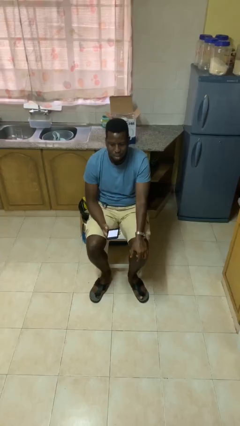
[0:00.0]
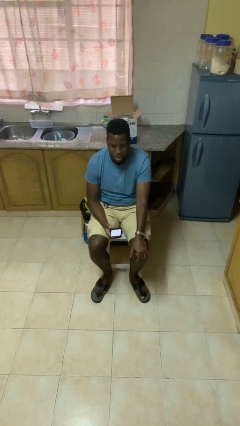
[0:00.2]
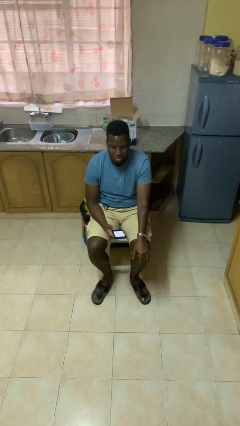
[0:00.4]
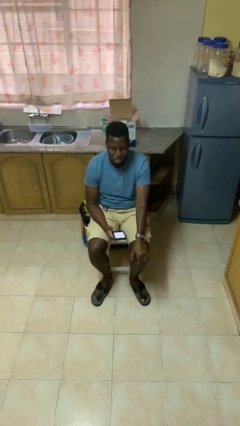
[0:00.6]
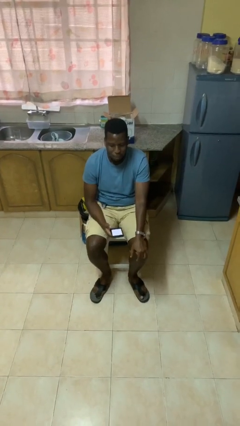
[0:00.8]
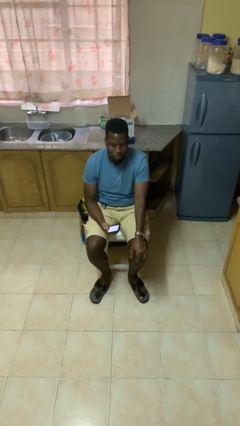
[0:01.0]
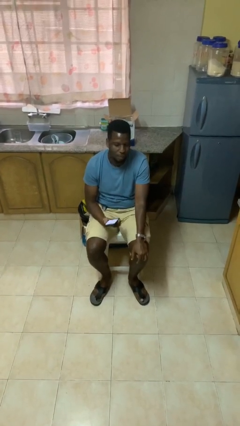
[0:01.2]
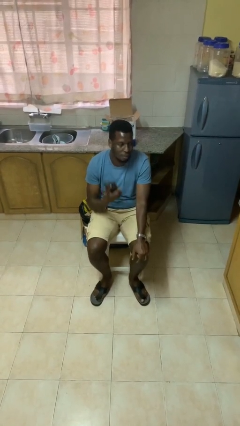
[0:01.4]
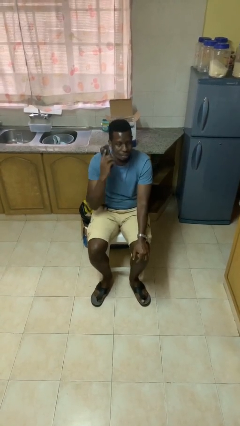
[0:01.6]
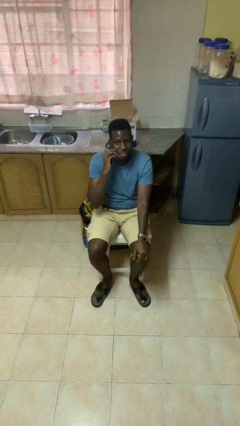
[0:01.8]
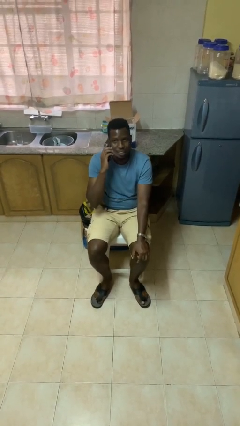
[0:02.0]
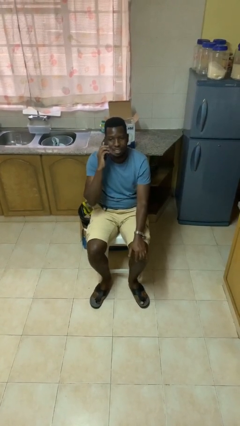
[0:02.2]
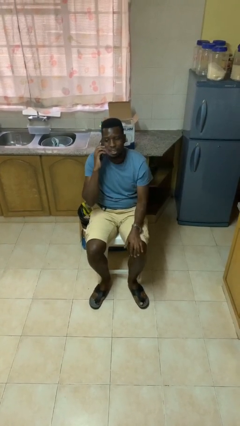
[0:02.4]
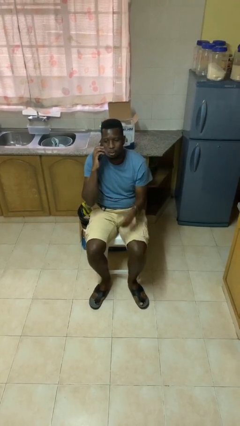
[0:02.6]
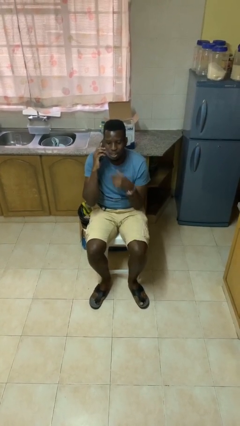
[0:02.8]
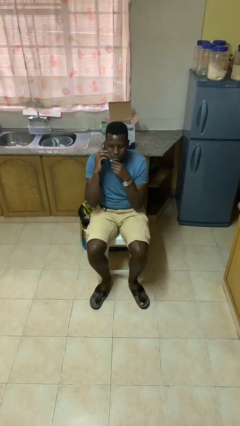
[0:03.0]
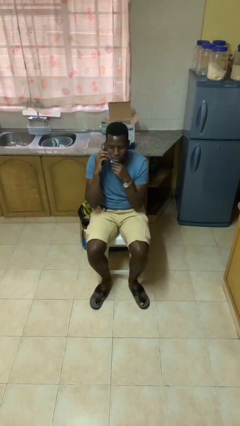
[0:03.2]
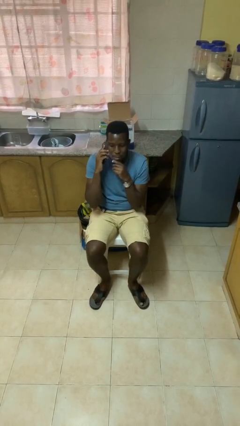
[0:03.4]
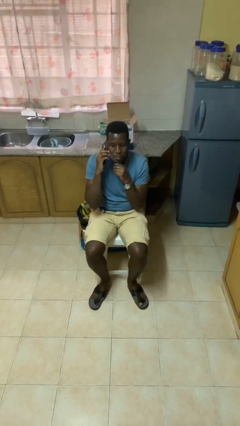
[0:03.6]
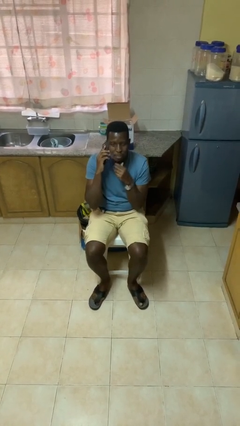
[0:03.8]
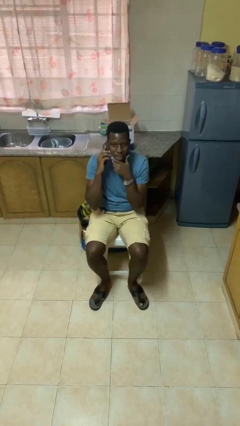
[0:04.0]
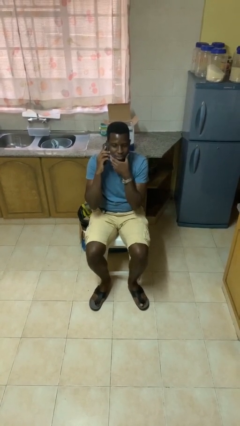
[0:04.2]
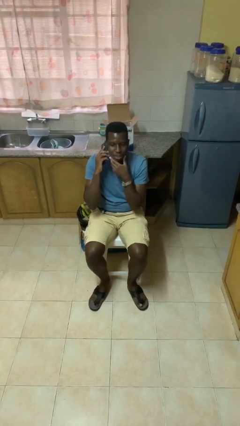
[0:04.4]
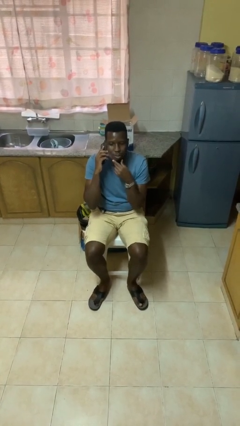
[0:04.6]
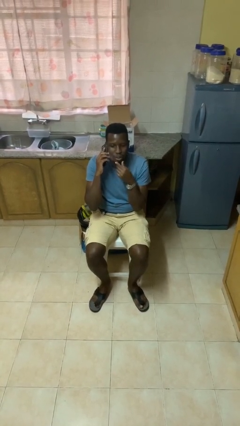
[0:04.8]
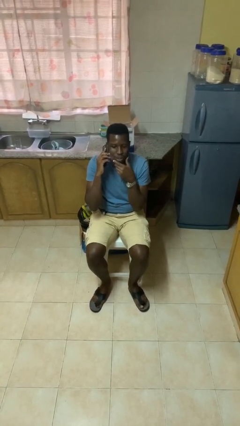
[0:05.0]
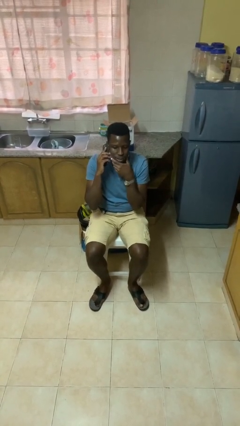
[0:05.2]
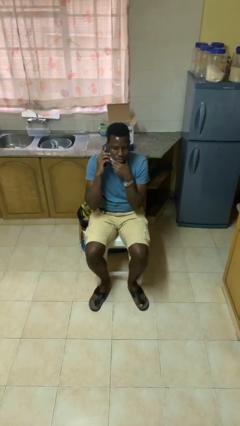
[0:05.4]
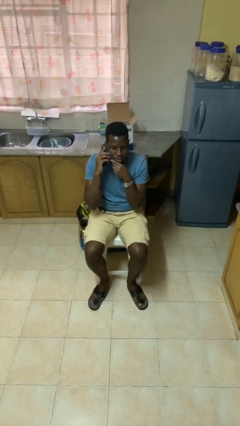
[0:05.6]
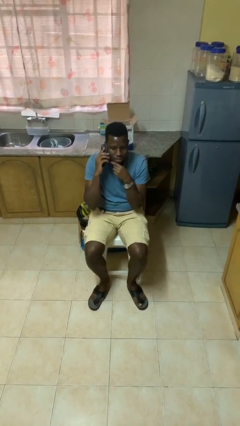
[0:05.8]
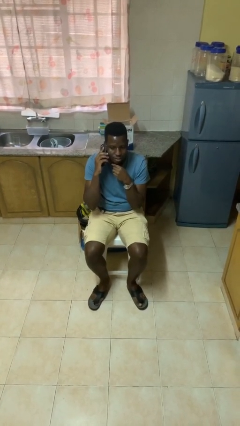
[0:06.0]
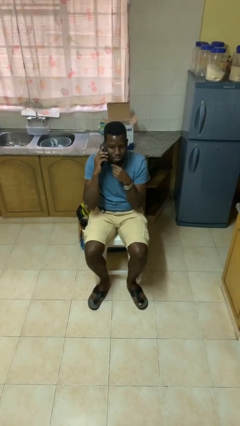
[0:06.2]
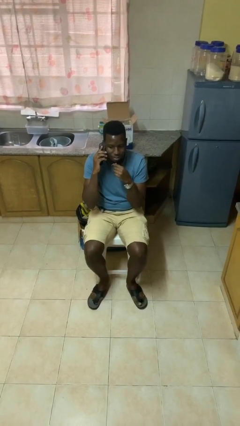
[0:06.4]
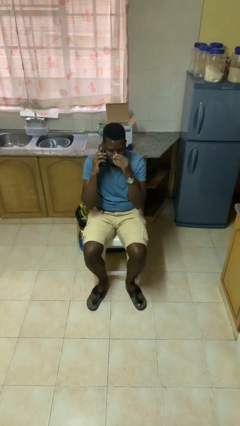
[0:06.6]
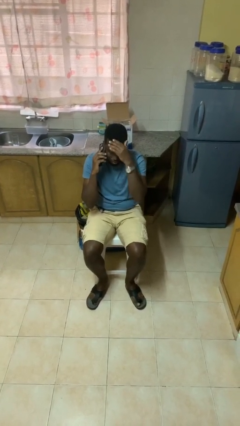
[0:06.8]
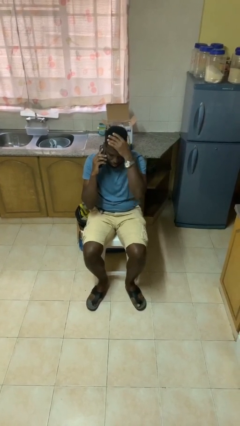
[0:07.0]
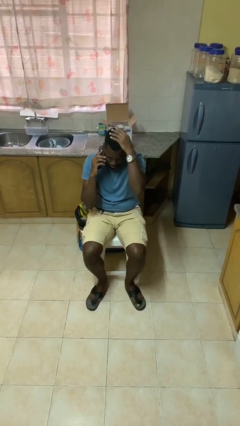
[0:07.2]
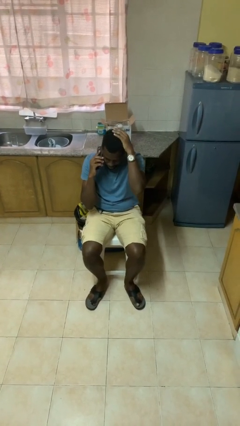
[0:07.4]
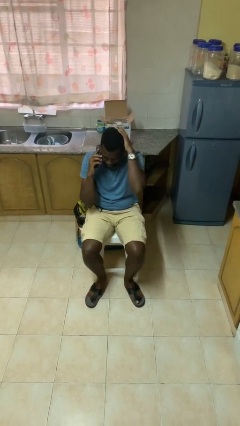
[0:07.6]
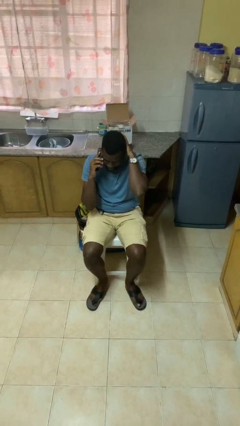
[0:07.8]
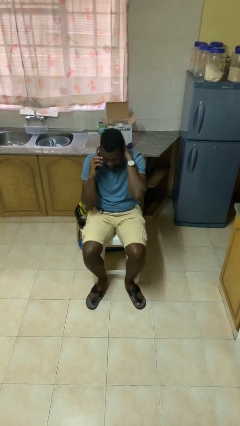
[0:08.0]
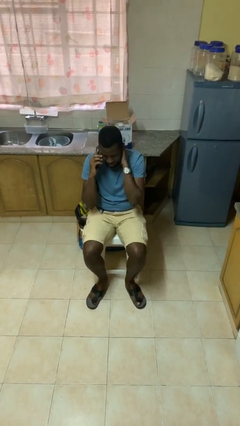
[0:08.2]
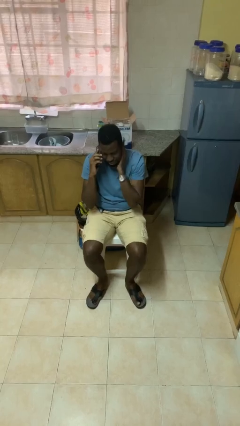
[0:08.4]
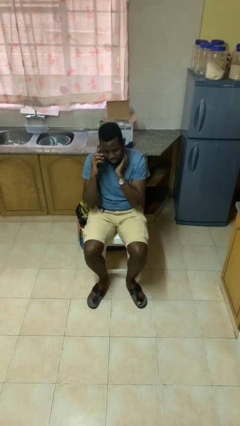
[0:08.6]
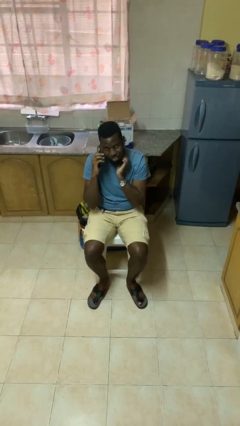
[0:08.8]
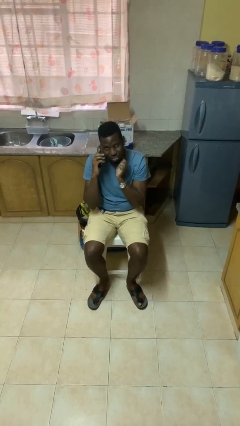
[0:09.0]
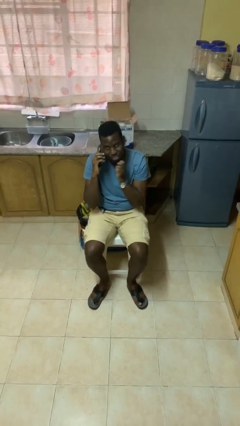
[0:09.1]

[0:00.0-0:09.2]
person talks on phone

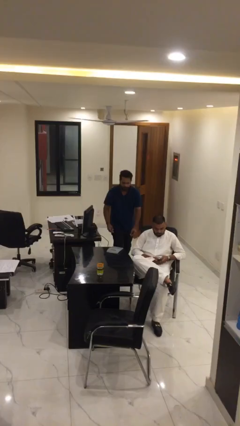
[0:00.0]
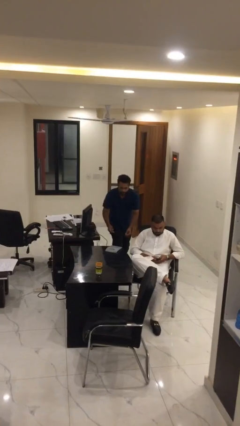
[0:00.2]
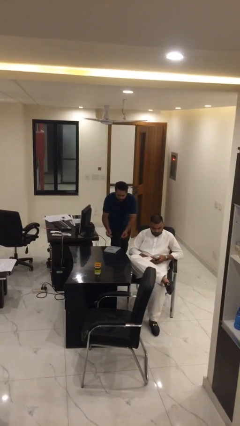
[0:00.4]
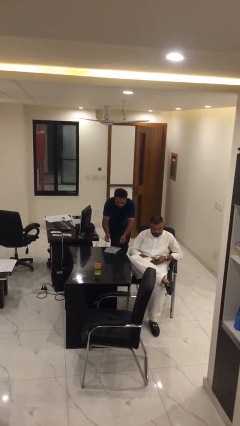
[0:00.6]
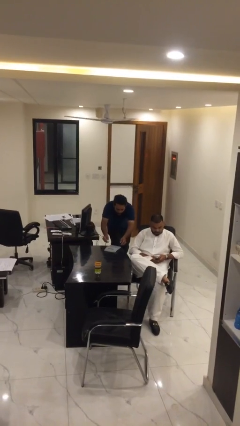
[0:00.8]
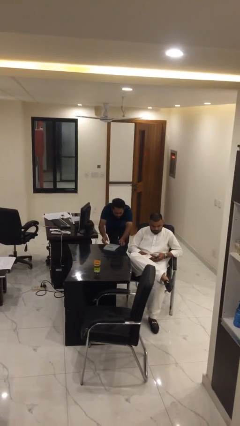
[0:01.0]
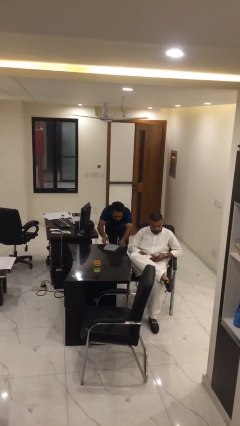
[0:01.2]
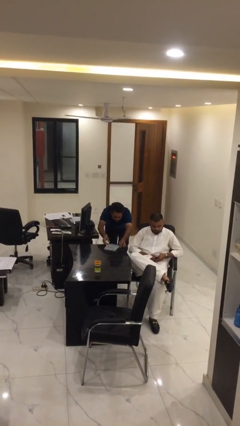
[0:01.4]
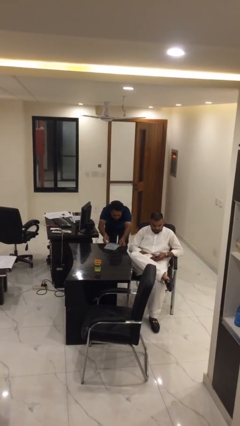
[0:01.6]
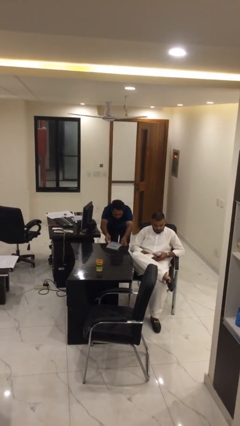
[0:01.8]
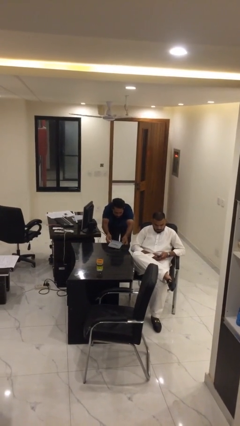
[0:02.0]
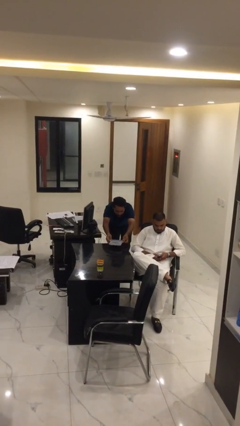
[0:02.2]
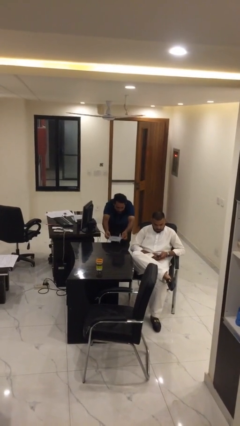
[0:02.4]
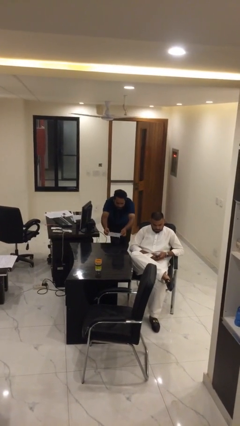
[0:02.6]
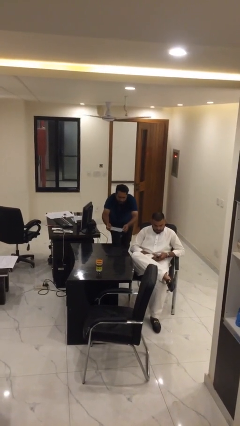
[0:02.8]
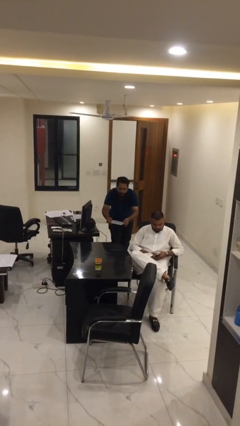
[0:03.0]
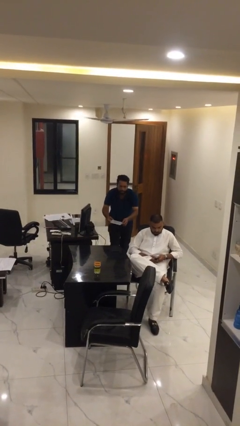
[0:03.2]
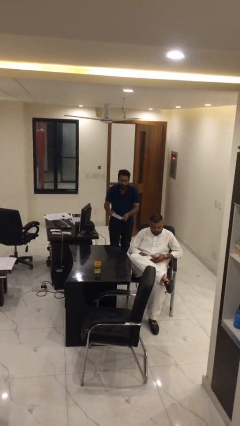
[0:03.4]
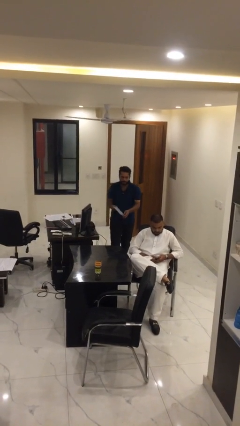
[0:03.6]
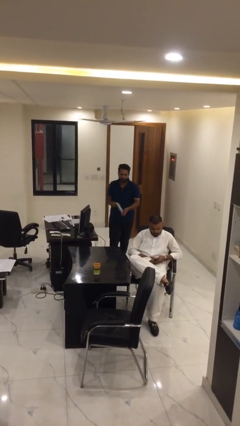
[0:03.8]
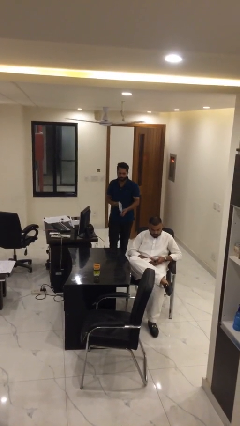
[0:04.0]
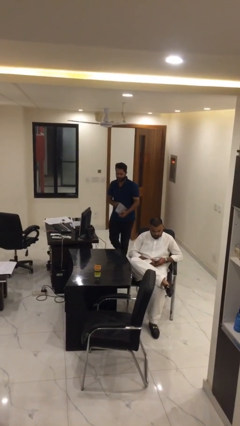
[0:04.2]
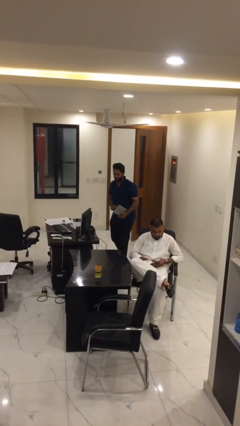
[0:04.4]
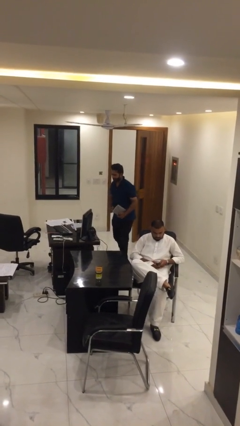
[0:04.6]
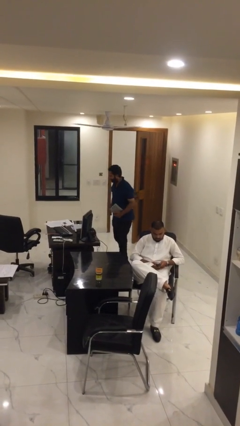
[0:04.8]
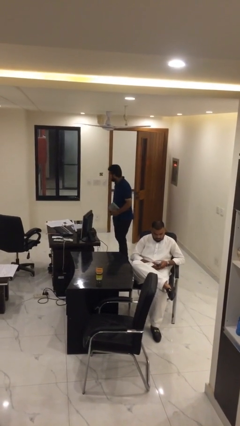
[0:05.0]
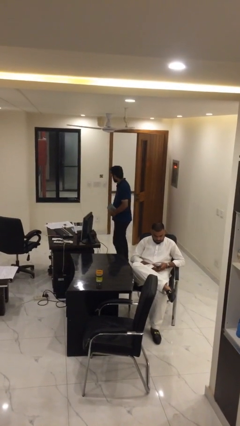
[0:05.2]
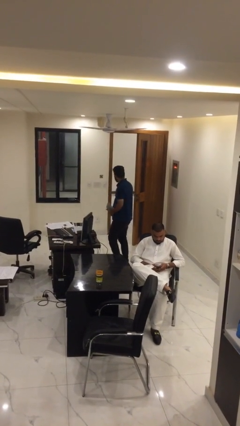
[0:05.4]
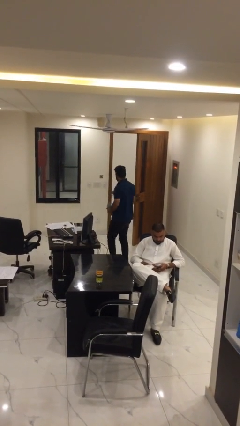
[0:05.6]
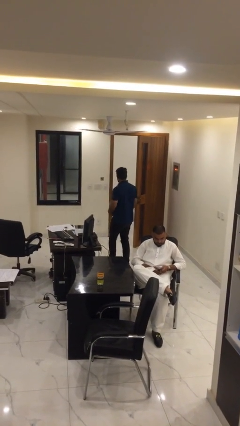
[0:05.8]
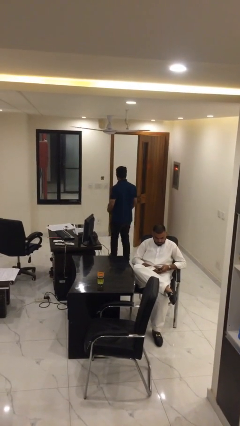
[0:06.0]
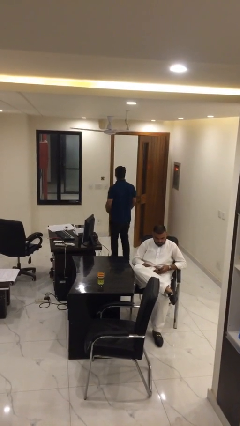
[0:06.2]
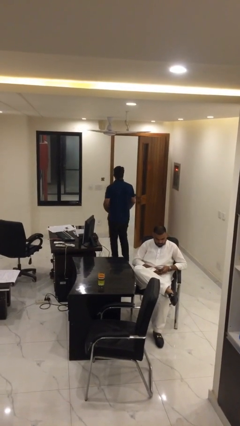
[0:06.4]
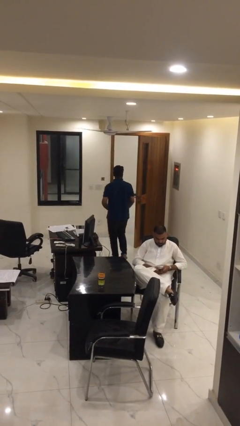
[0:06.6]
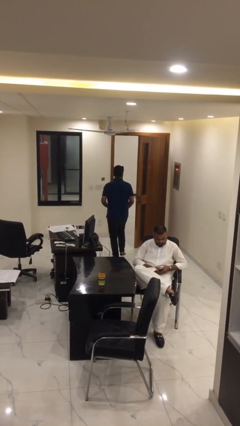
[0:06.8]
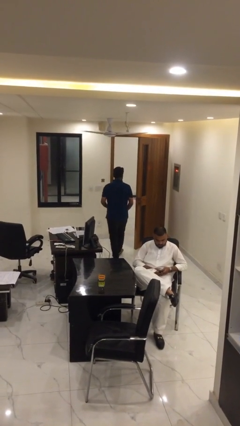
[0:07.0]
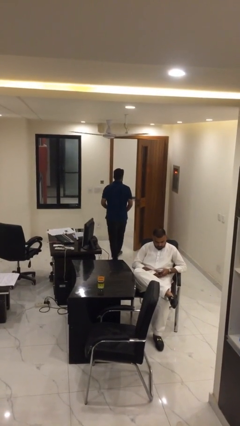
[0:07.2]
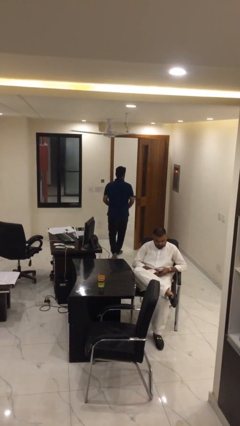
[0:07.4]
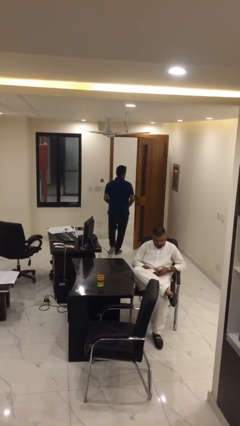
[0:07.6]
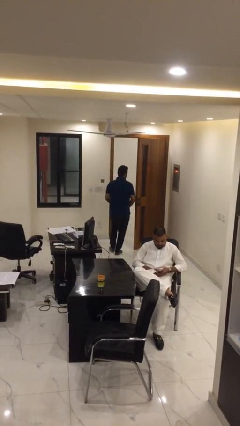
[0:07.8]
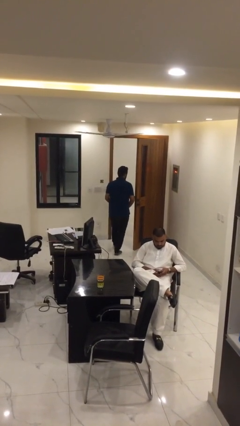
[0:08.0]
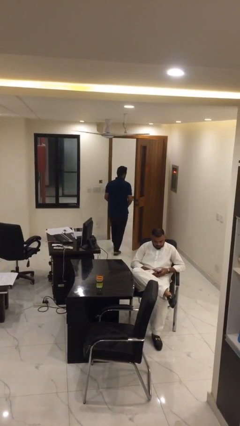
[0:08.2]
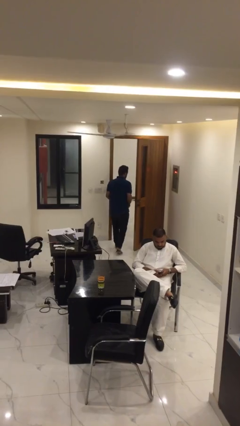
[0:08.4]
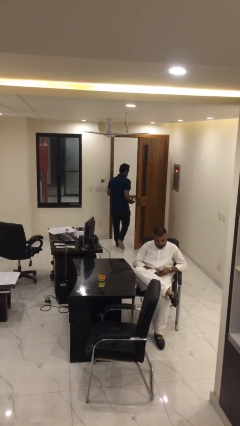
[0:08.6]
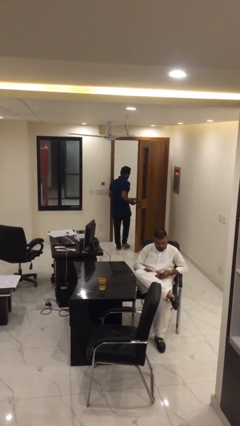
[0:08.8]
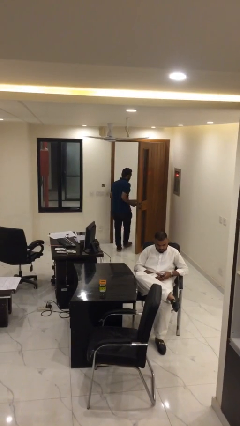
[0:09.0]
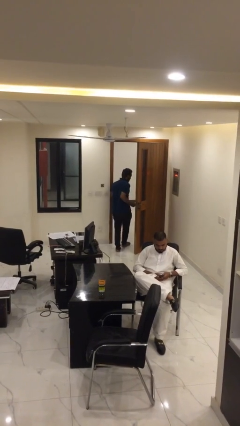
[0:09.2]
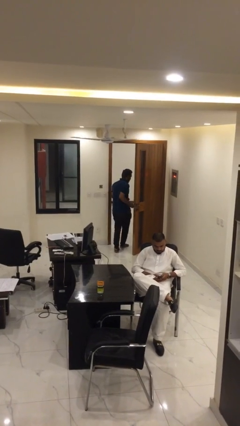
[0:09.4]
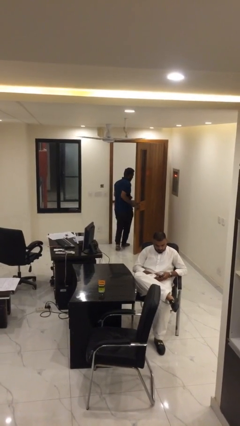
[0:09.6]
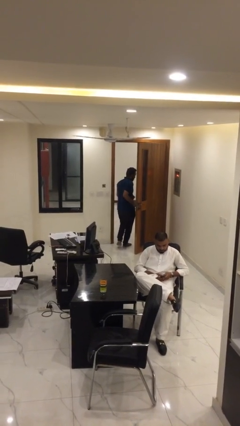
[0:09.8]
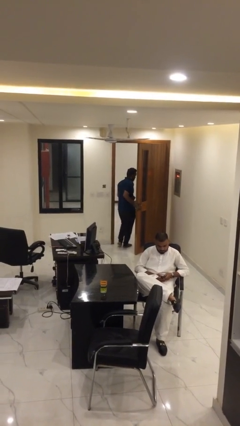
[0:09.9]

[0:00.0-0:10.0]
person steals object from person
